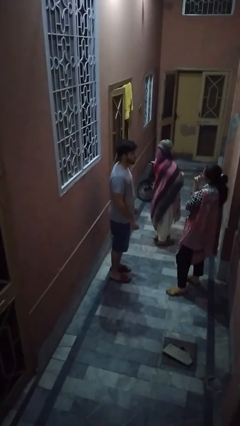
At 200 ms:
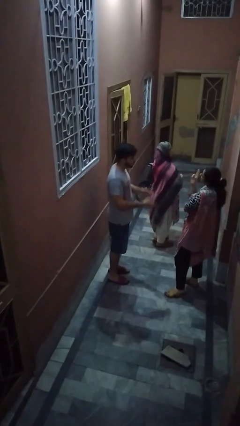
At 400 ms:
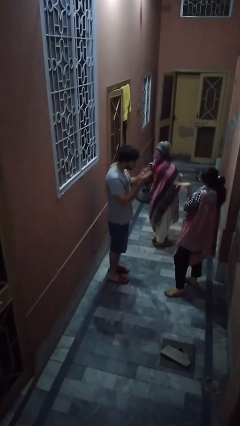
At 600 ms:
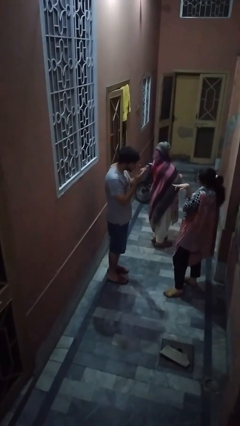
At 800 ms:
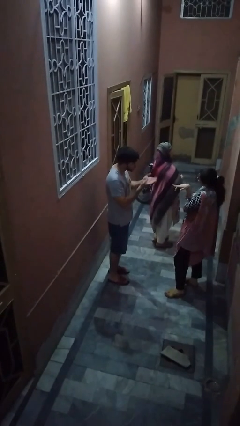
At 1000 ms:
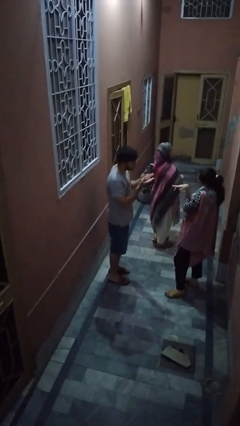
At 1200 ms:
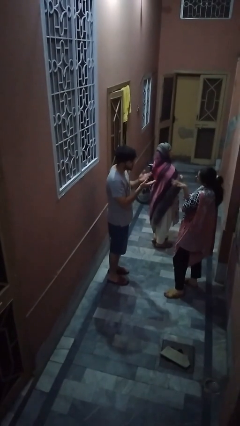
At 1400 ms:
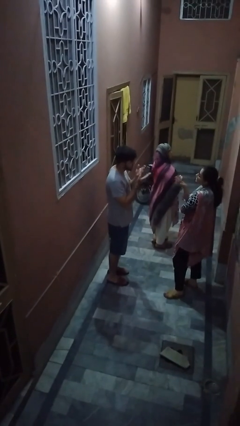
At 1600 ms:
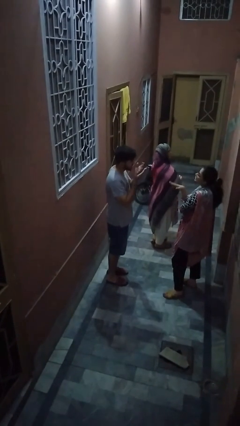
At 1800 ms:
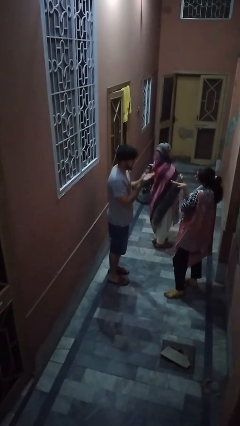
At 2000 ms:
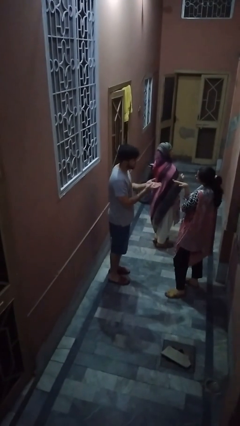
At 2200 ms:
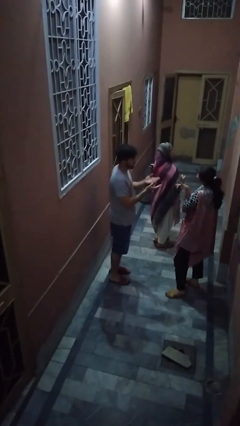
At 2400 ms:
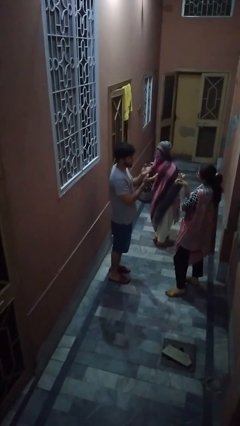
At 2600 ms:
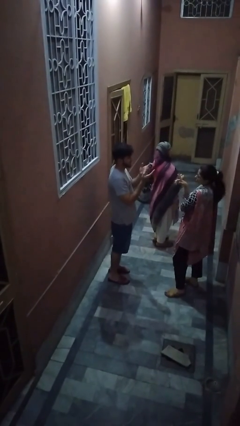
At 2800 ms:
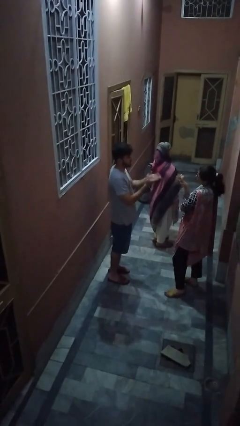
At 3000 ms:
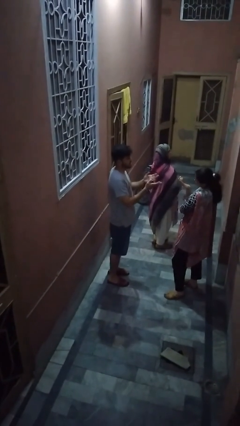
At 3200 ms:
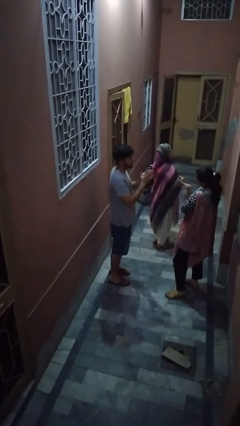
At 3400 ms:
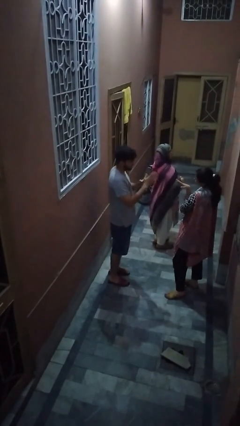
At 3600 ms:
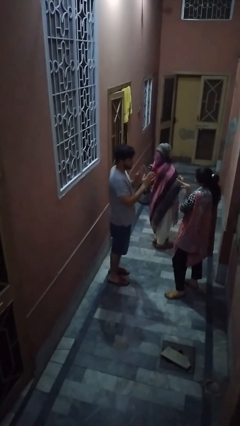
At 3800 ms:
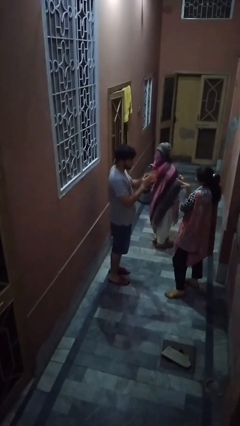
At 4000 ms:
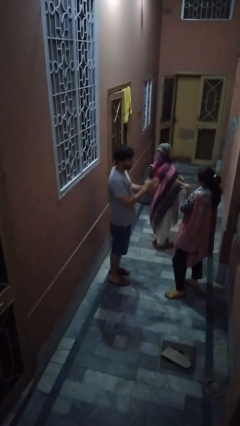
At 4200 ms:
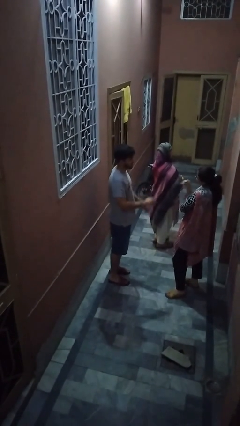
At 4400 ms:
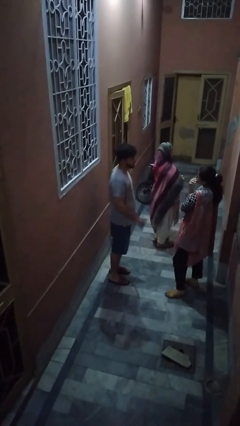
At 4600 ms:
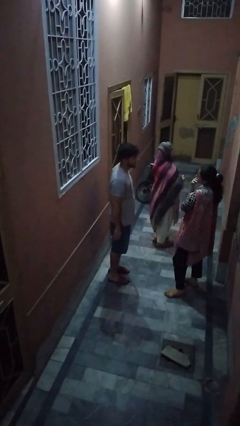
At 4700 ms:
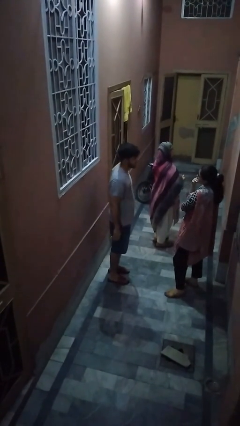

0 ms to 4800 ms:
person talks to person

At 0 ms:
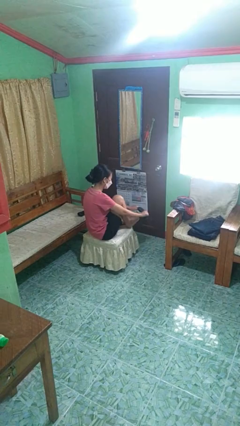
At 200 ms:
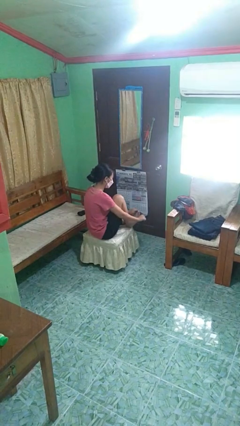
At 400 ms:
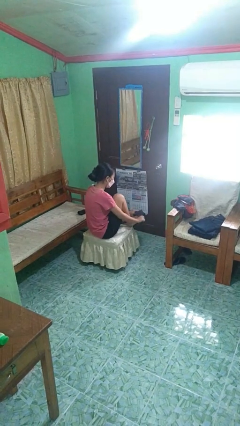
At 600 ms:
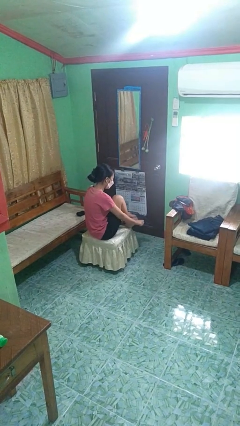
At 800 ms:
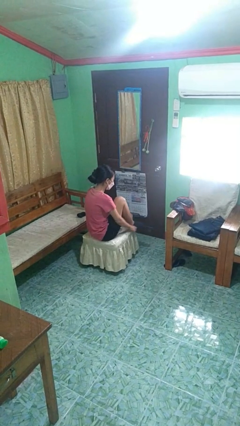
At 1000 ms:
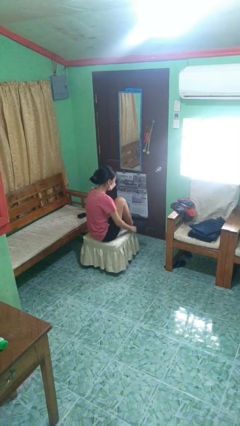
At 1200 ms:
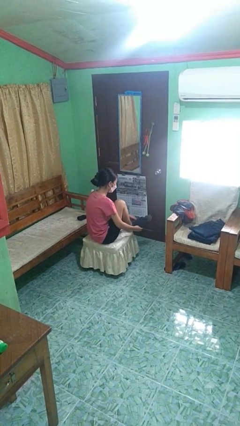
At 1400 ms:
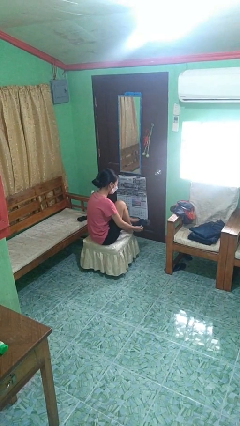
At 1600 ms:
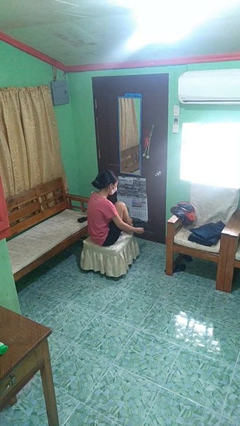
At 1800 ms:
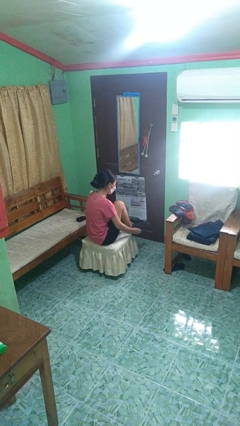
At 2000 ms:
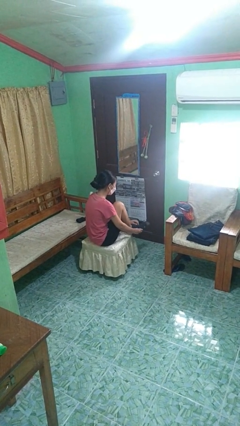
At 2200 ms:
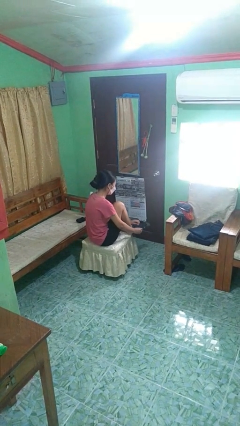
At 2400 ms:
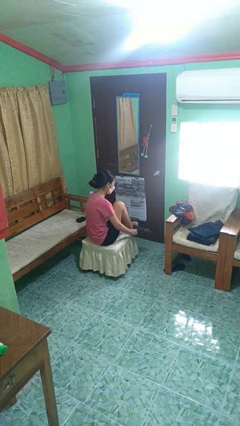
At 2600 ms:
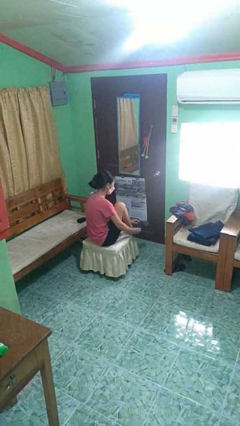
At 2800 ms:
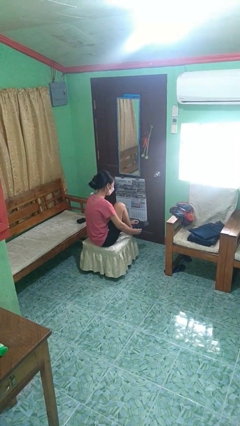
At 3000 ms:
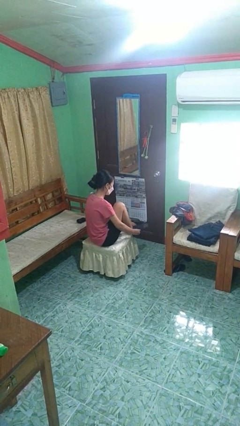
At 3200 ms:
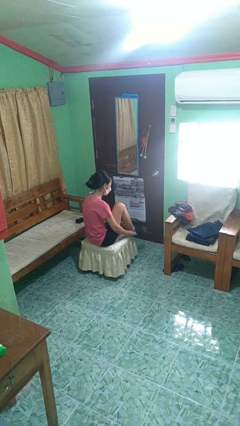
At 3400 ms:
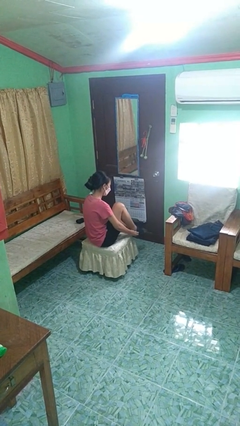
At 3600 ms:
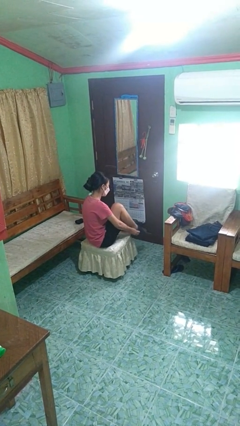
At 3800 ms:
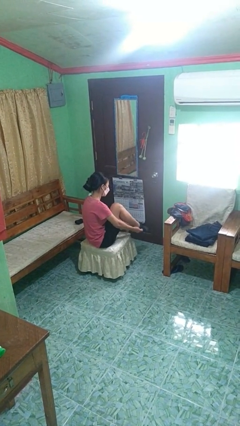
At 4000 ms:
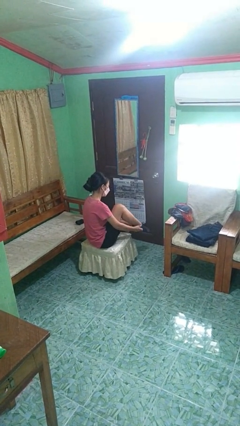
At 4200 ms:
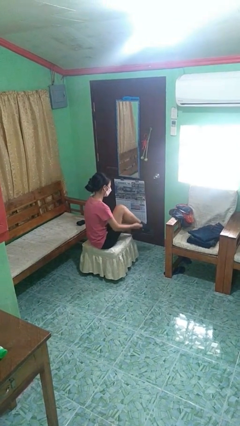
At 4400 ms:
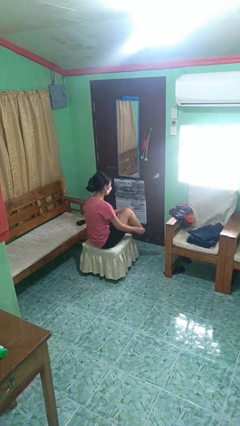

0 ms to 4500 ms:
person puts on socks

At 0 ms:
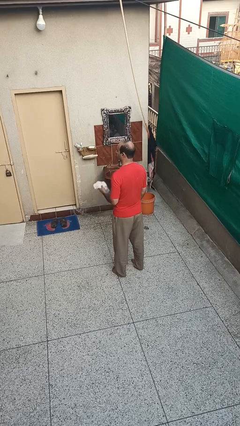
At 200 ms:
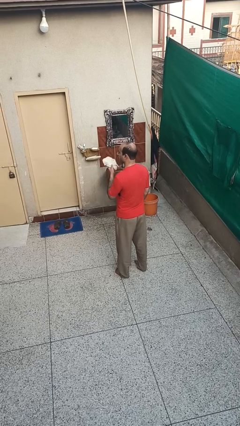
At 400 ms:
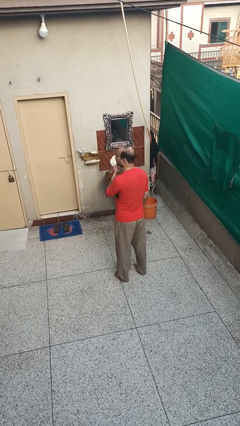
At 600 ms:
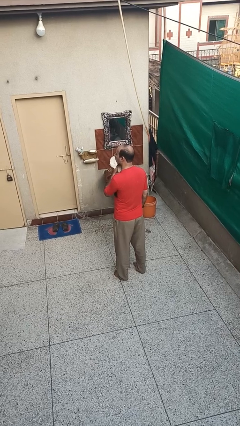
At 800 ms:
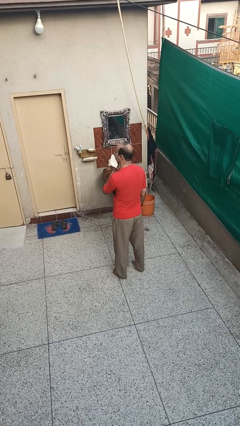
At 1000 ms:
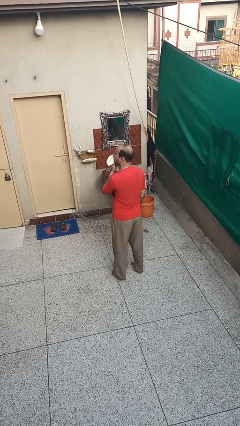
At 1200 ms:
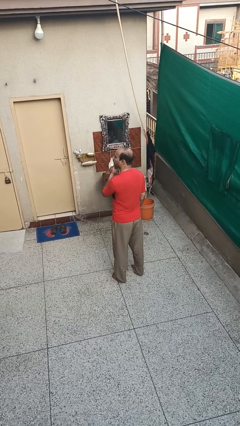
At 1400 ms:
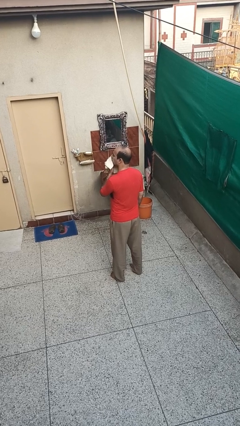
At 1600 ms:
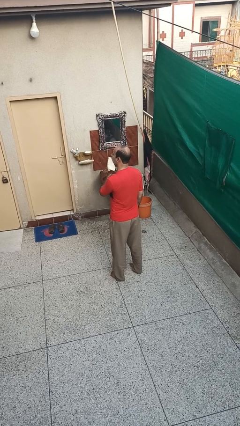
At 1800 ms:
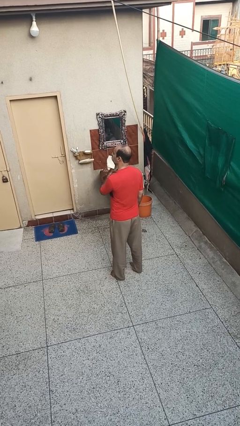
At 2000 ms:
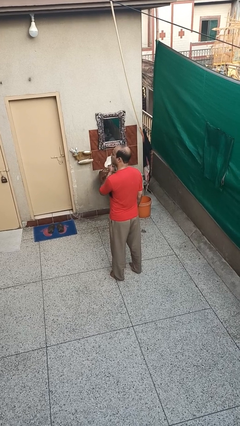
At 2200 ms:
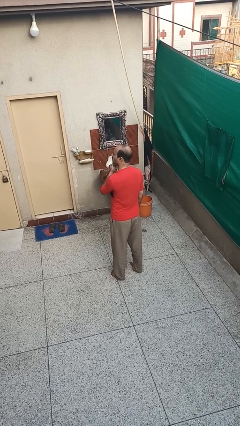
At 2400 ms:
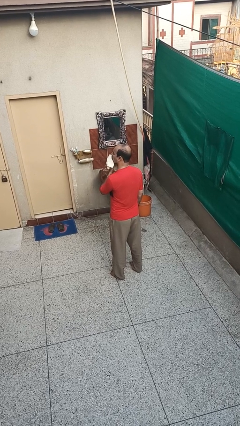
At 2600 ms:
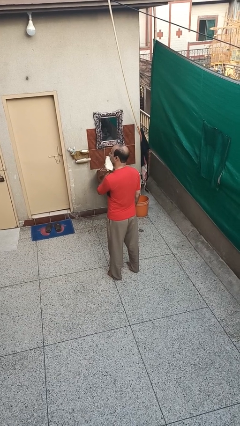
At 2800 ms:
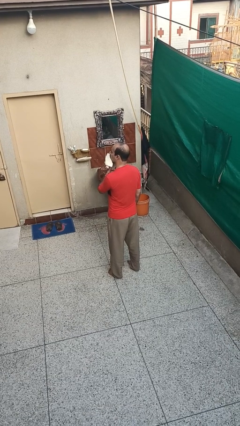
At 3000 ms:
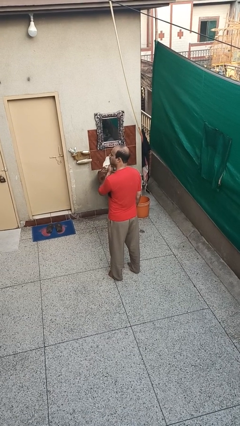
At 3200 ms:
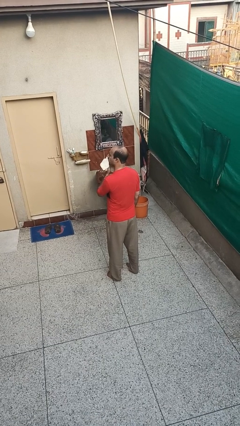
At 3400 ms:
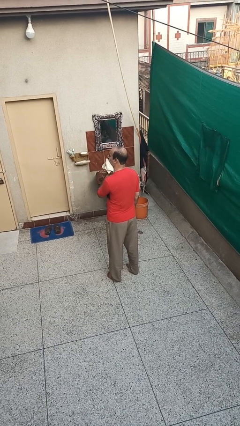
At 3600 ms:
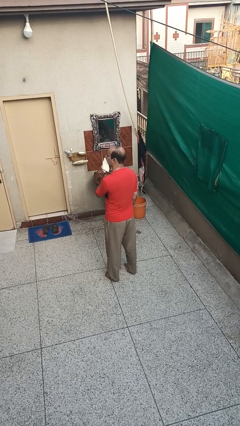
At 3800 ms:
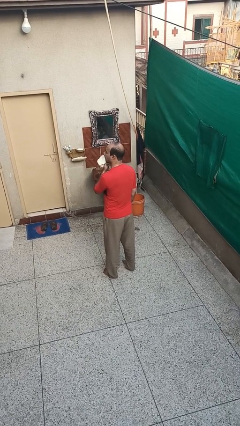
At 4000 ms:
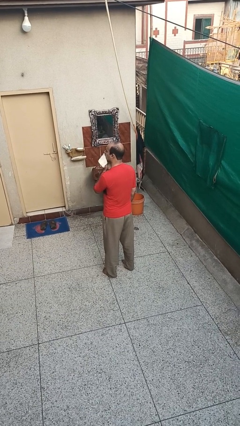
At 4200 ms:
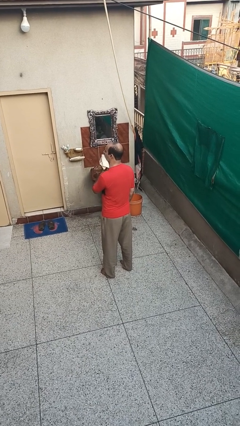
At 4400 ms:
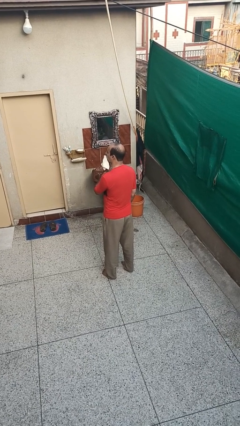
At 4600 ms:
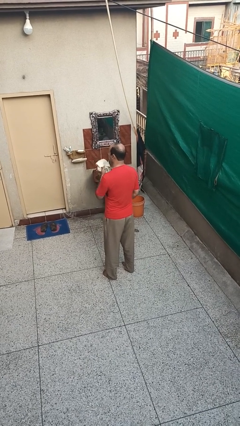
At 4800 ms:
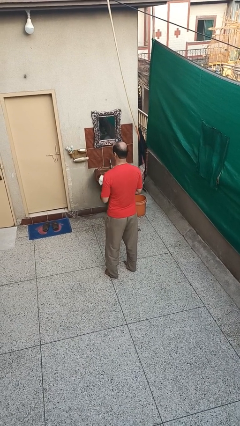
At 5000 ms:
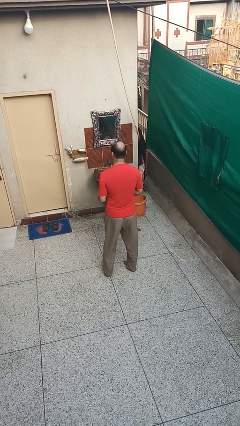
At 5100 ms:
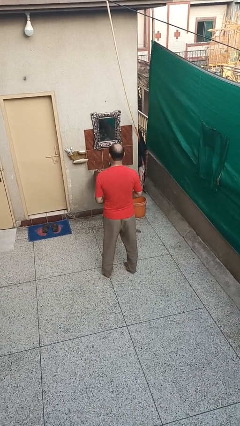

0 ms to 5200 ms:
person wipes mouth with napkin

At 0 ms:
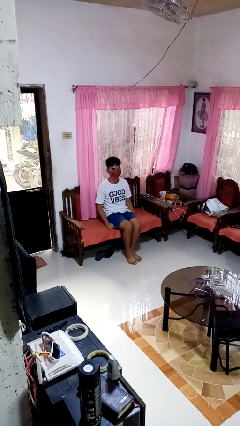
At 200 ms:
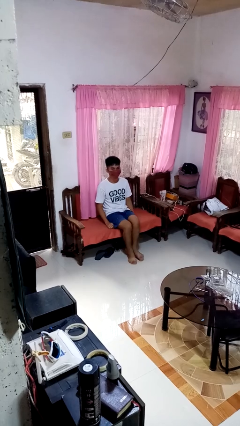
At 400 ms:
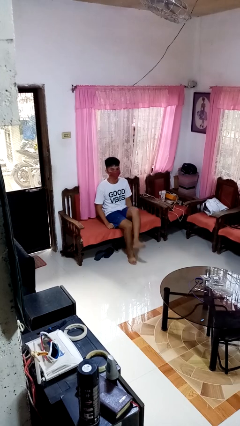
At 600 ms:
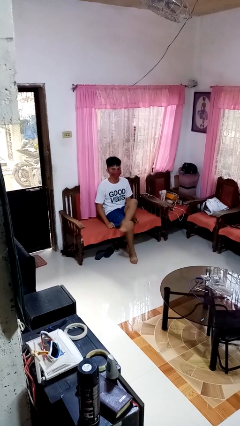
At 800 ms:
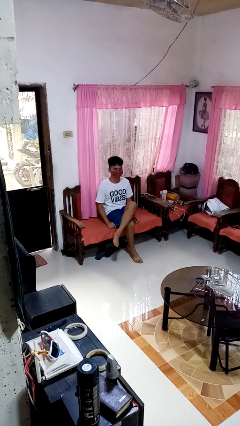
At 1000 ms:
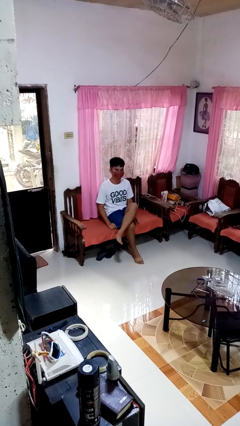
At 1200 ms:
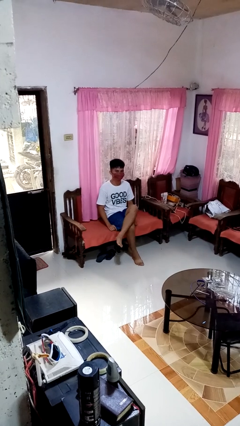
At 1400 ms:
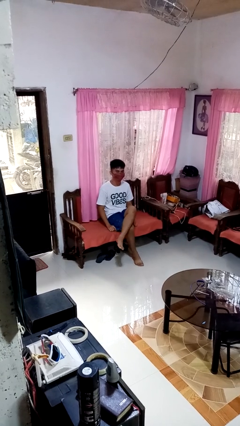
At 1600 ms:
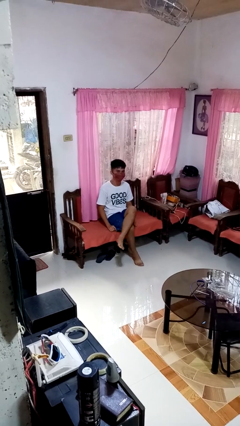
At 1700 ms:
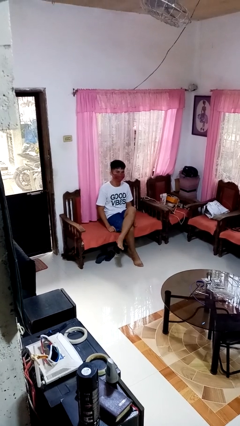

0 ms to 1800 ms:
person crosses legs

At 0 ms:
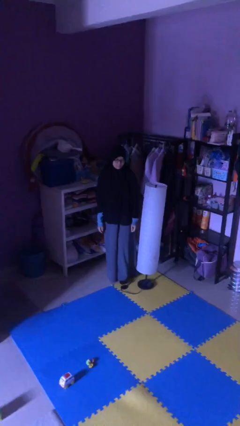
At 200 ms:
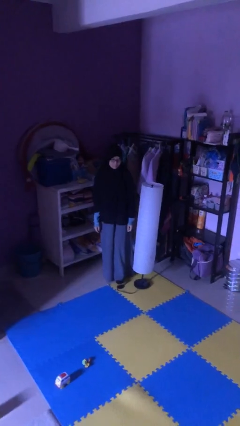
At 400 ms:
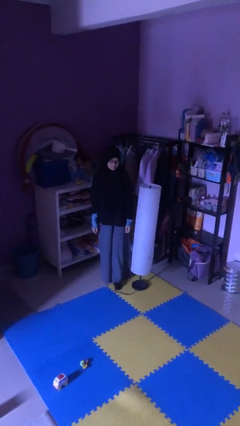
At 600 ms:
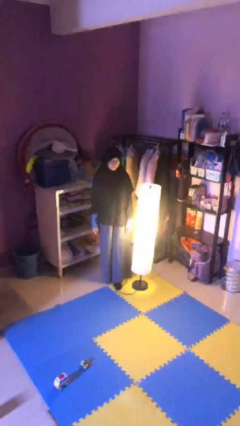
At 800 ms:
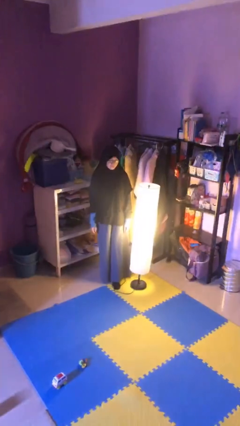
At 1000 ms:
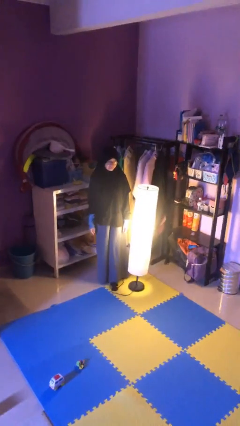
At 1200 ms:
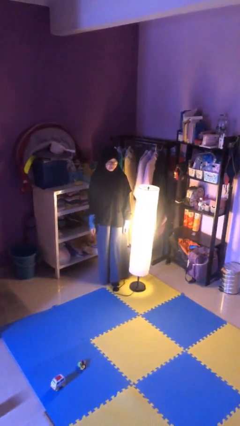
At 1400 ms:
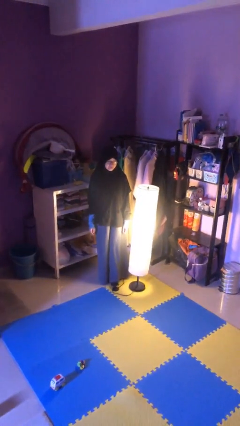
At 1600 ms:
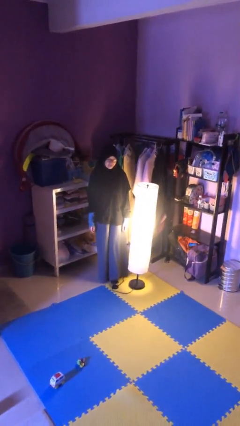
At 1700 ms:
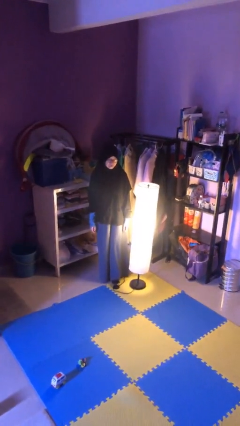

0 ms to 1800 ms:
person turns on lamp
